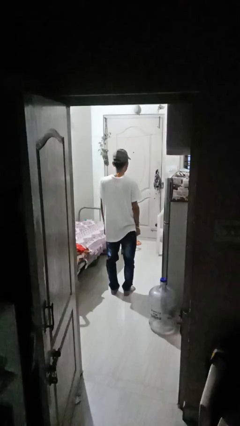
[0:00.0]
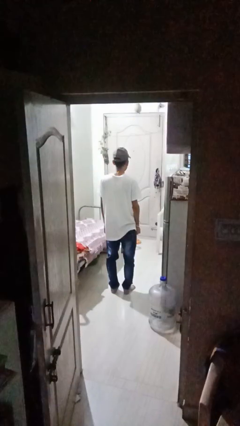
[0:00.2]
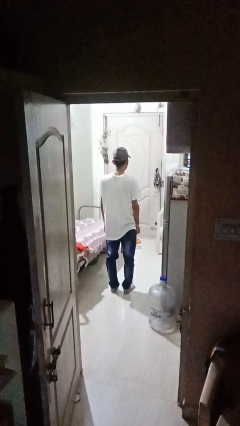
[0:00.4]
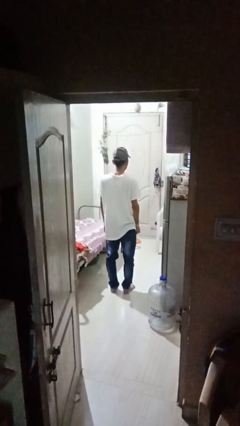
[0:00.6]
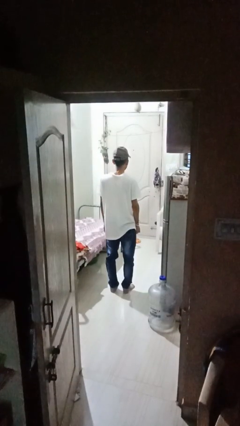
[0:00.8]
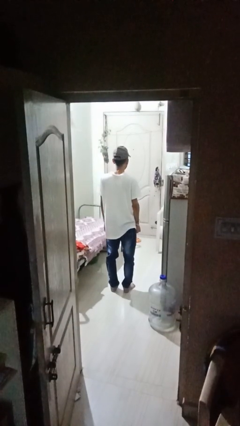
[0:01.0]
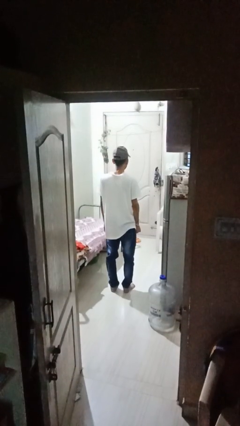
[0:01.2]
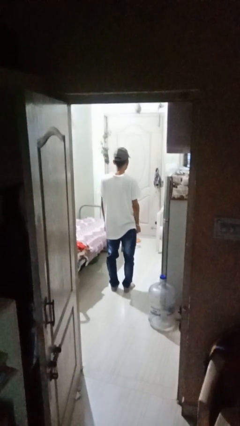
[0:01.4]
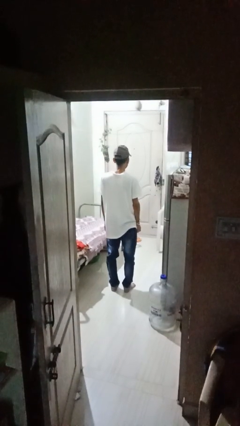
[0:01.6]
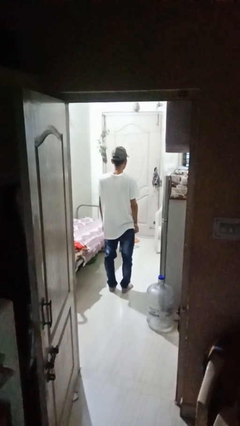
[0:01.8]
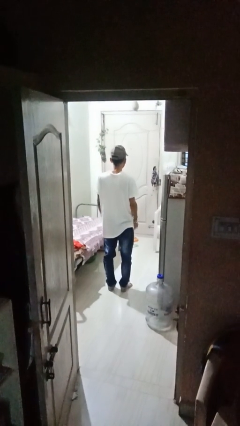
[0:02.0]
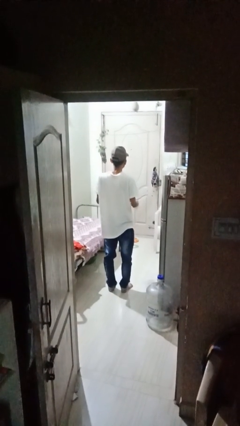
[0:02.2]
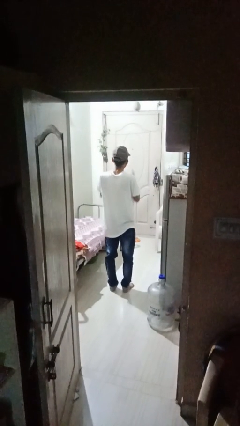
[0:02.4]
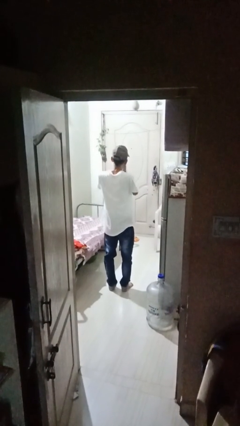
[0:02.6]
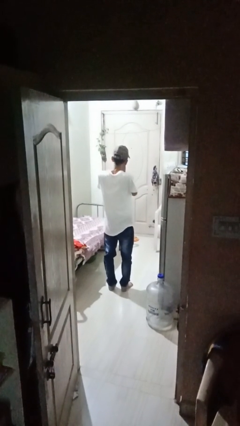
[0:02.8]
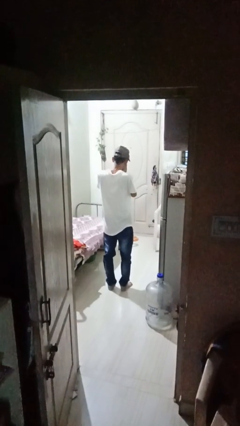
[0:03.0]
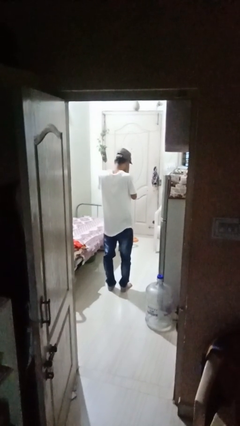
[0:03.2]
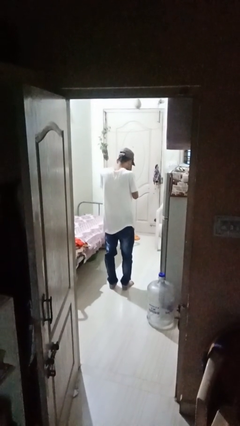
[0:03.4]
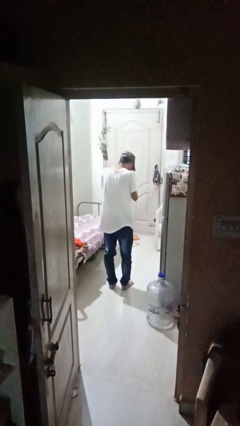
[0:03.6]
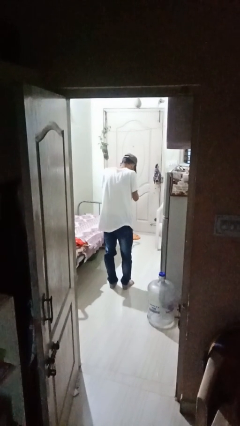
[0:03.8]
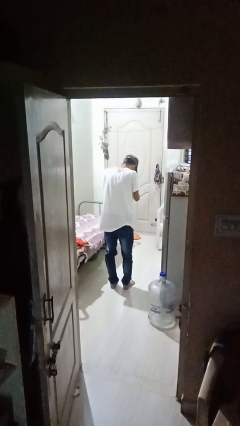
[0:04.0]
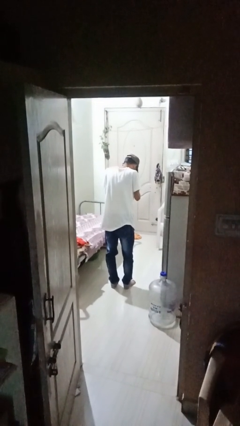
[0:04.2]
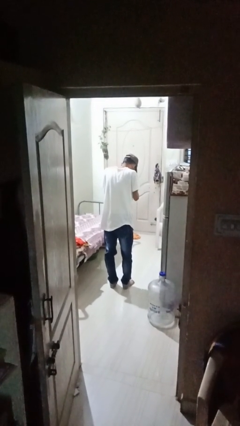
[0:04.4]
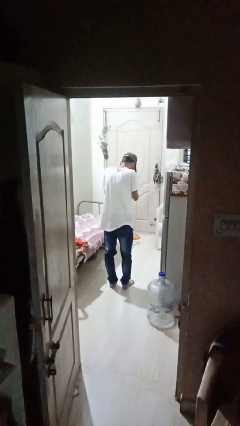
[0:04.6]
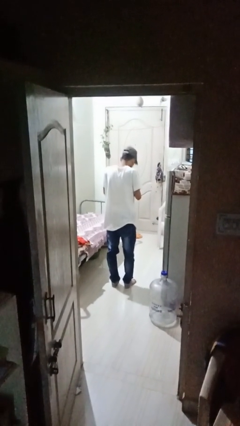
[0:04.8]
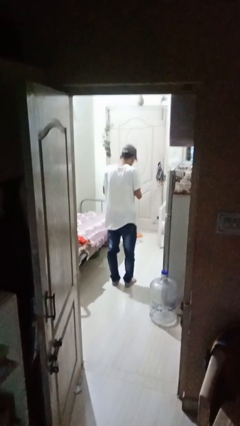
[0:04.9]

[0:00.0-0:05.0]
person prays

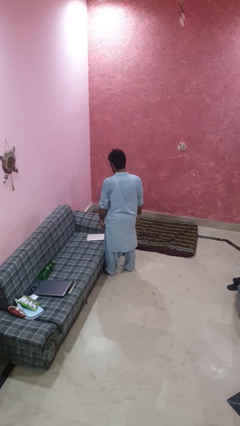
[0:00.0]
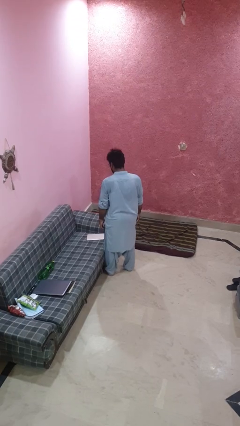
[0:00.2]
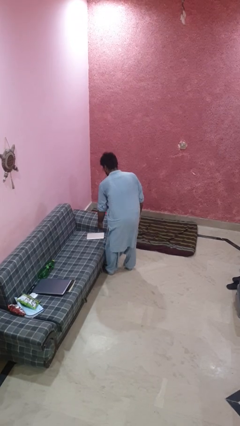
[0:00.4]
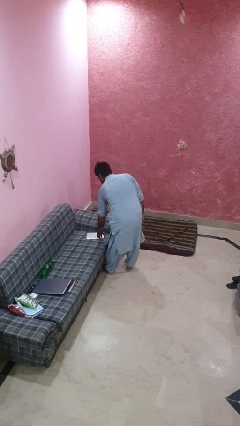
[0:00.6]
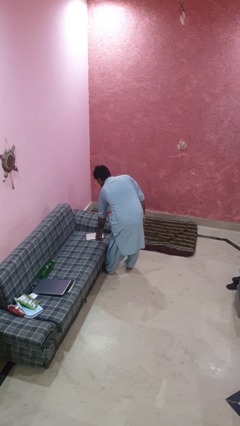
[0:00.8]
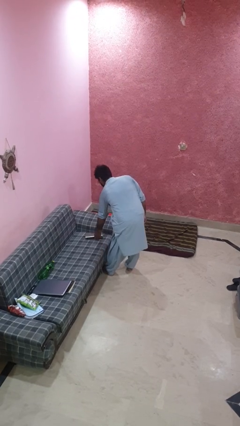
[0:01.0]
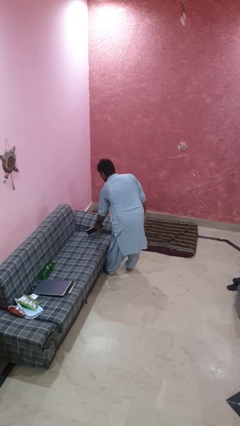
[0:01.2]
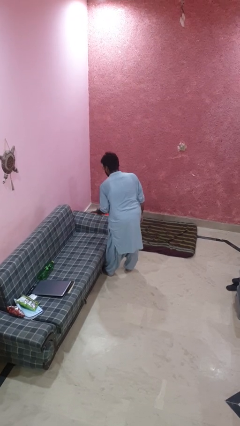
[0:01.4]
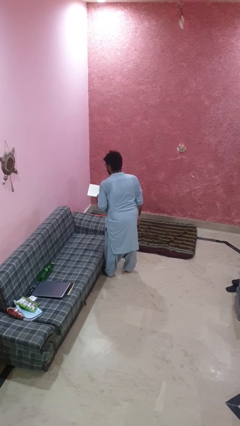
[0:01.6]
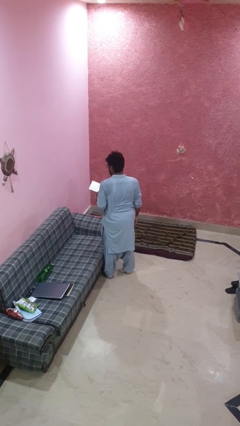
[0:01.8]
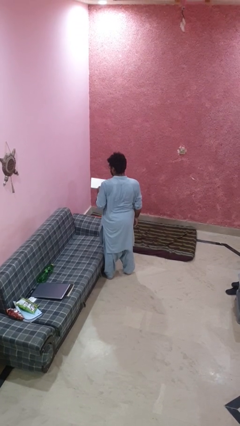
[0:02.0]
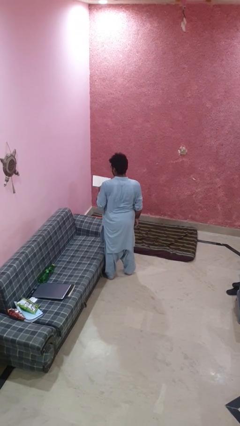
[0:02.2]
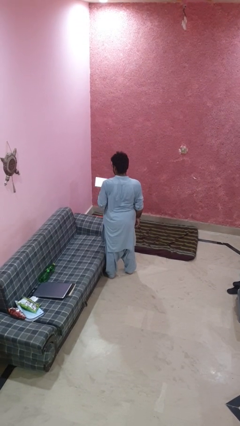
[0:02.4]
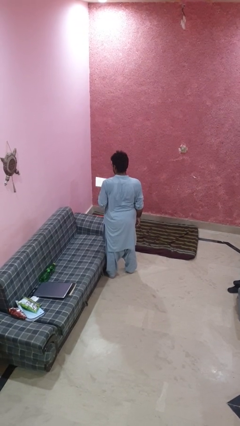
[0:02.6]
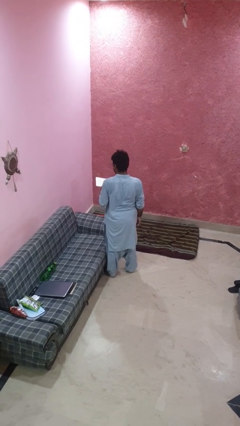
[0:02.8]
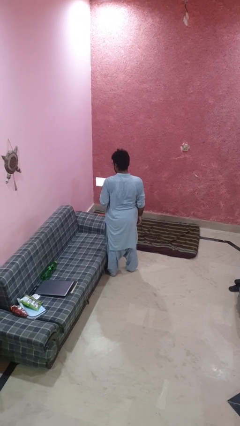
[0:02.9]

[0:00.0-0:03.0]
person picks up object from couch

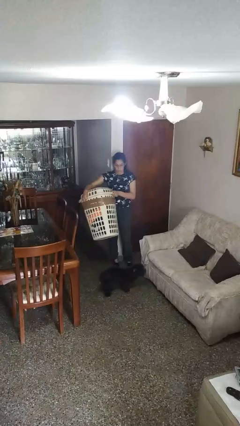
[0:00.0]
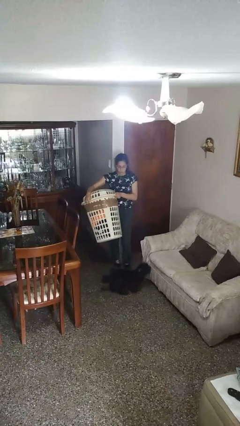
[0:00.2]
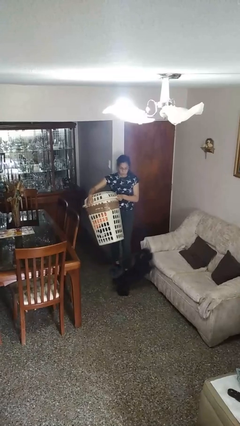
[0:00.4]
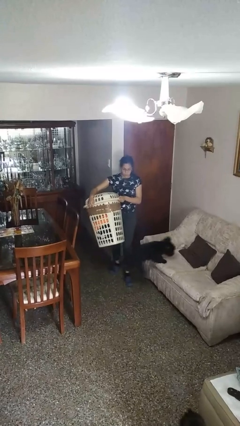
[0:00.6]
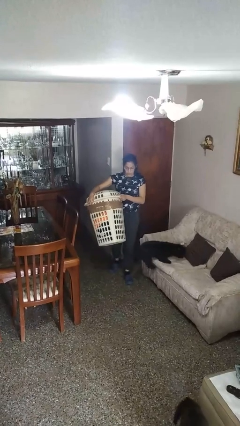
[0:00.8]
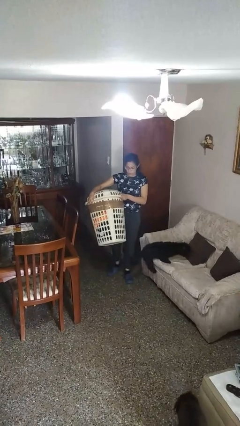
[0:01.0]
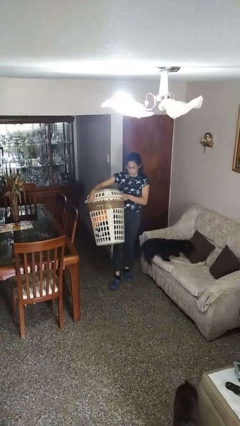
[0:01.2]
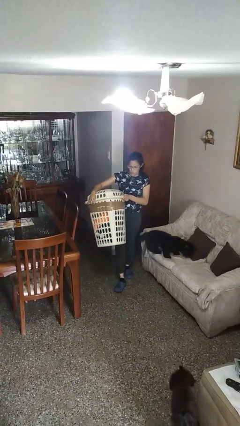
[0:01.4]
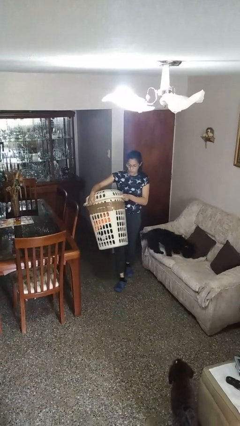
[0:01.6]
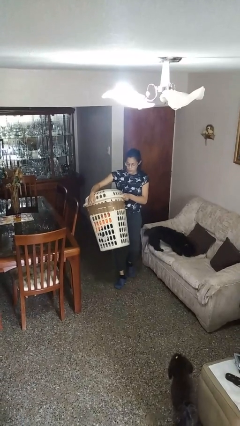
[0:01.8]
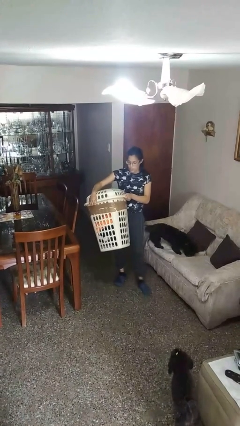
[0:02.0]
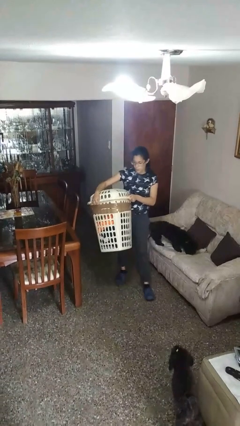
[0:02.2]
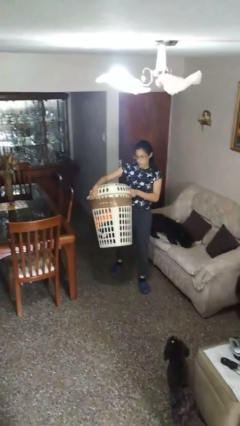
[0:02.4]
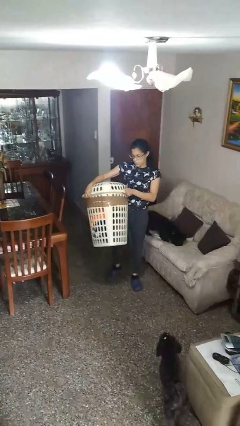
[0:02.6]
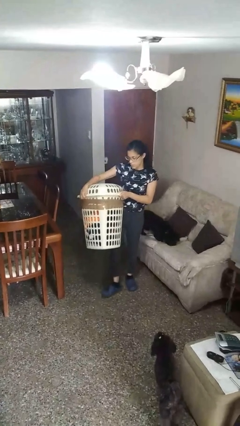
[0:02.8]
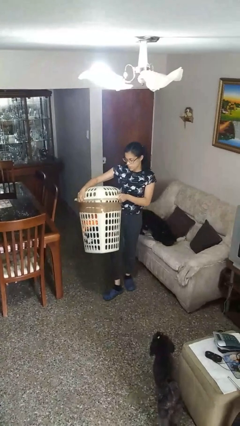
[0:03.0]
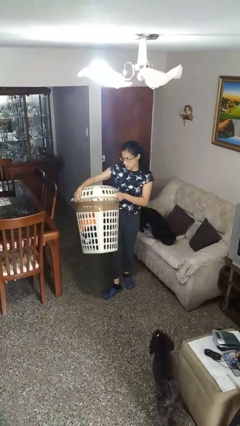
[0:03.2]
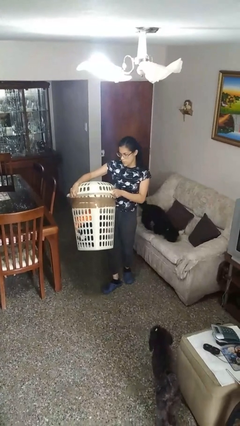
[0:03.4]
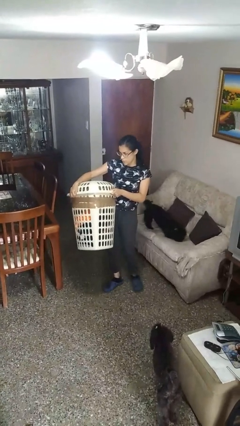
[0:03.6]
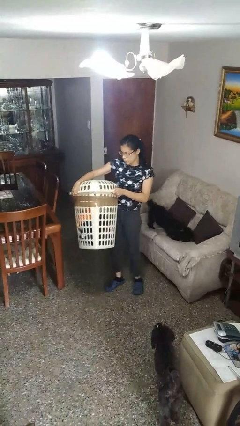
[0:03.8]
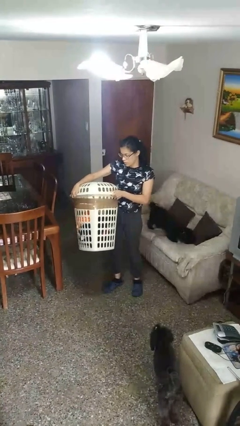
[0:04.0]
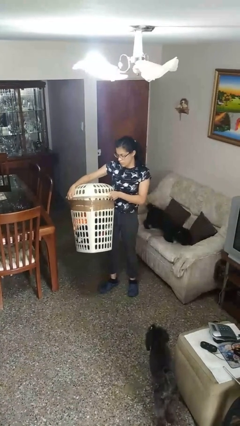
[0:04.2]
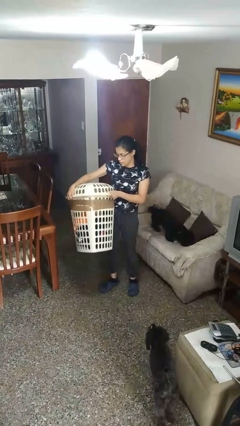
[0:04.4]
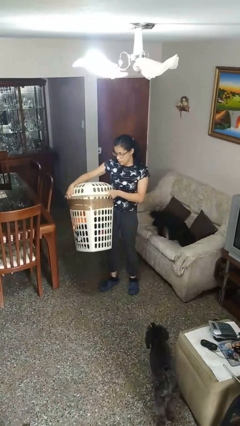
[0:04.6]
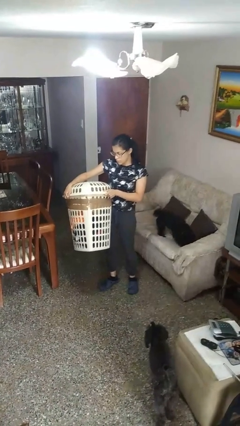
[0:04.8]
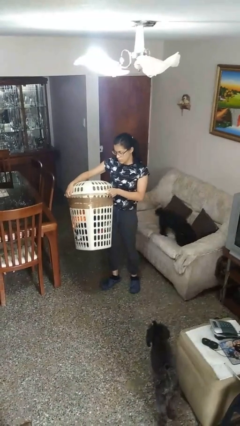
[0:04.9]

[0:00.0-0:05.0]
person carries laundry basket

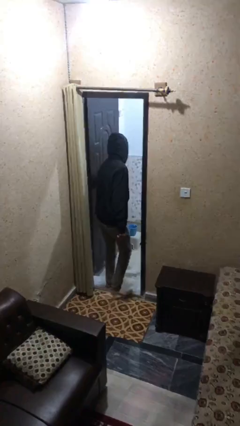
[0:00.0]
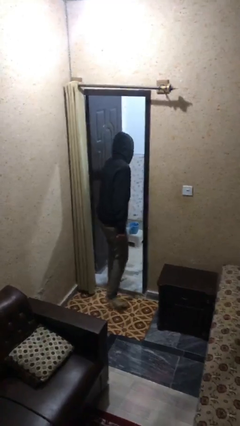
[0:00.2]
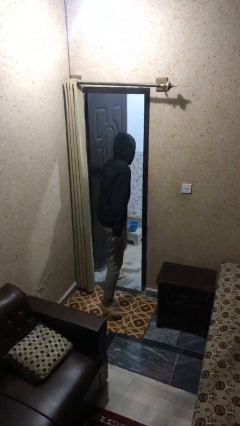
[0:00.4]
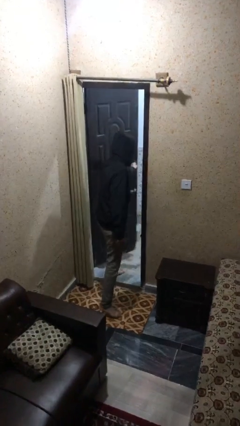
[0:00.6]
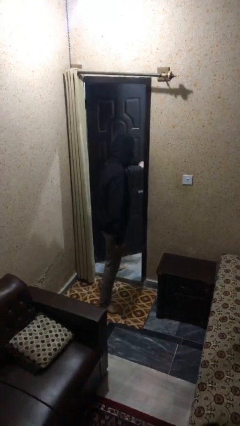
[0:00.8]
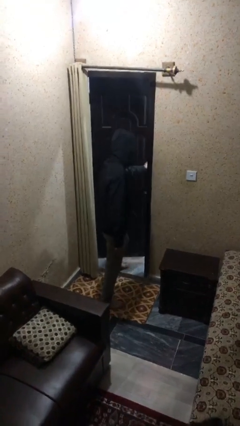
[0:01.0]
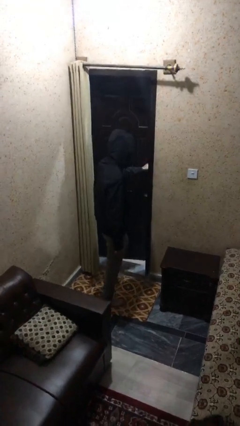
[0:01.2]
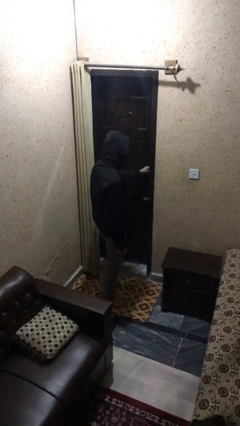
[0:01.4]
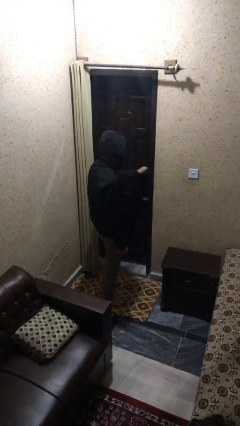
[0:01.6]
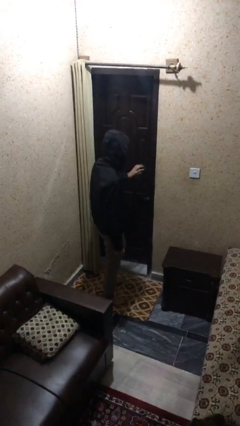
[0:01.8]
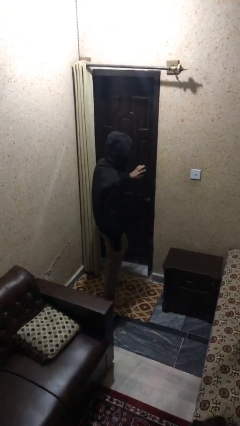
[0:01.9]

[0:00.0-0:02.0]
person closes facility door

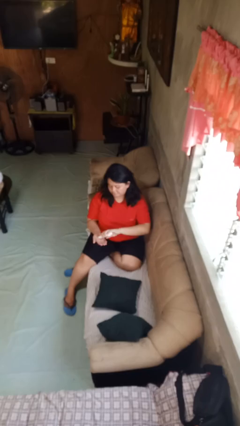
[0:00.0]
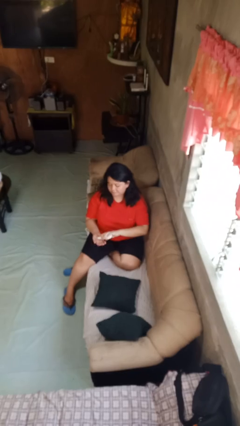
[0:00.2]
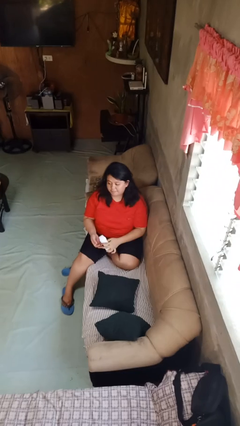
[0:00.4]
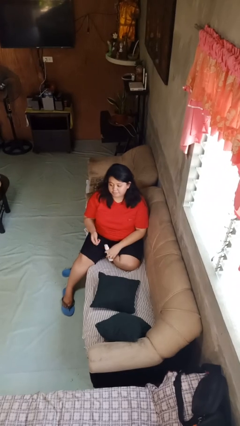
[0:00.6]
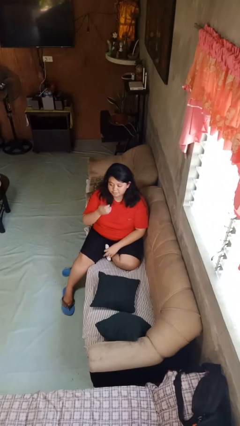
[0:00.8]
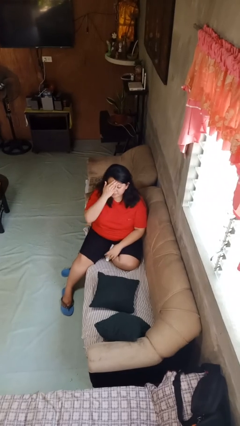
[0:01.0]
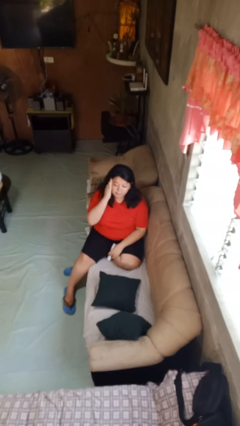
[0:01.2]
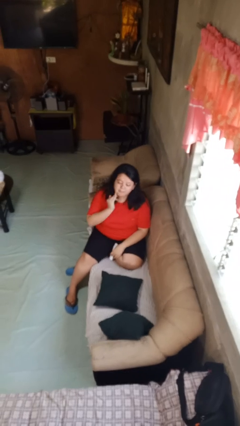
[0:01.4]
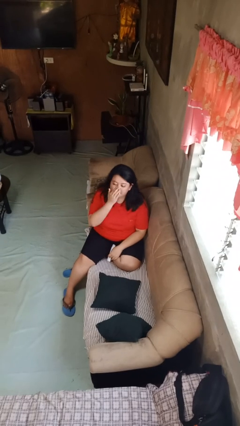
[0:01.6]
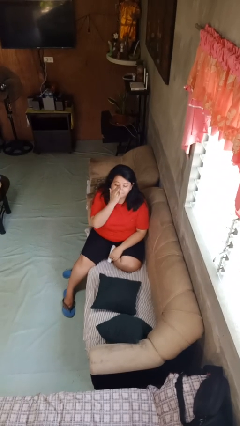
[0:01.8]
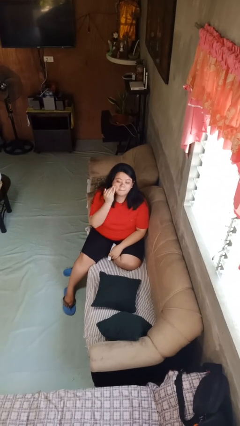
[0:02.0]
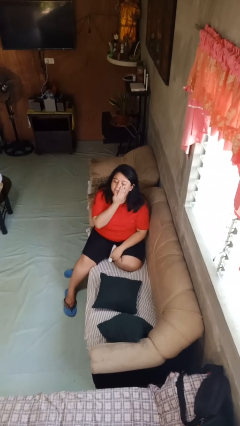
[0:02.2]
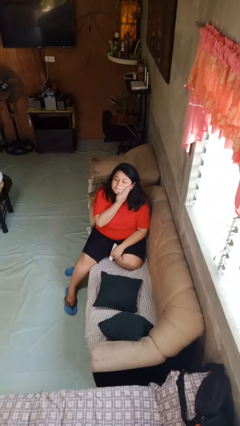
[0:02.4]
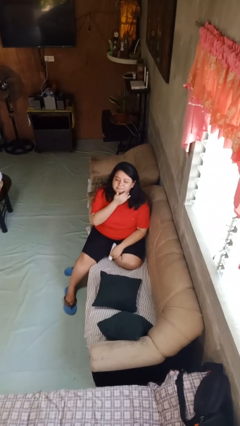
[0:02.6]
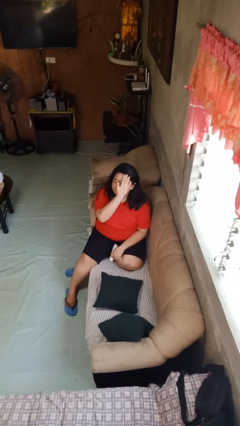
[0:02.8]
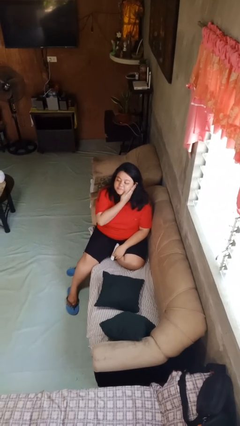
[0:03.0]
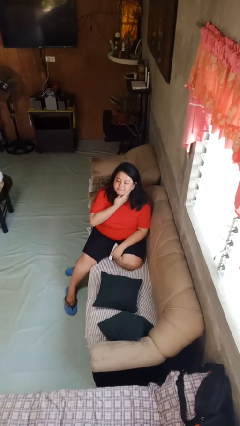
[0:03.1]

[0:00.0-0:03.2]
person applies facial moisturizer
